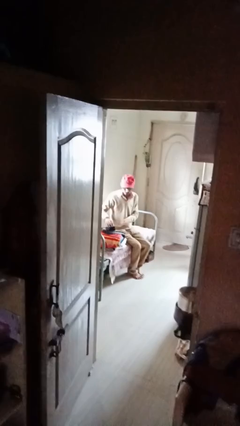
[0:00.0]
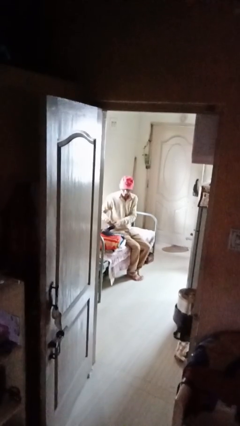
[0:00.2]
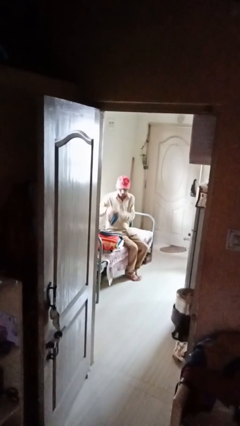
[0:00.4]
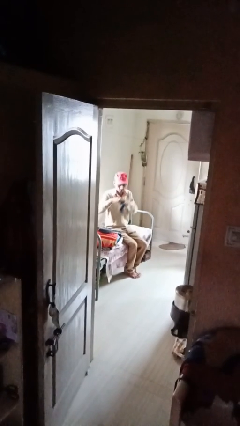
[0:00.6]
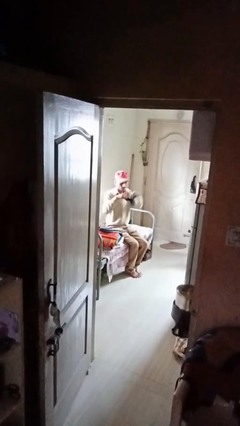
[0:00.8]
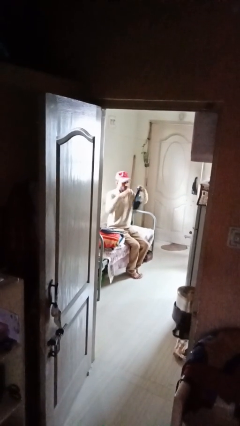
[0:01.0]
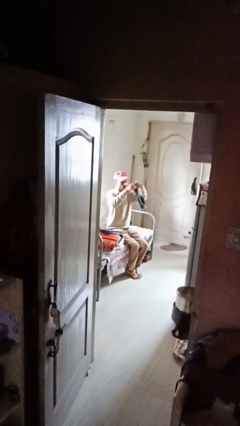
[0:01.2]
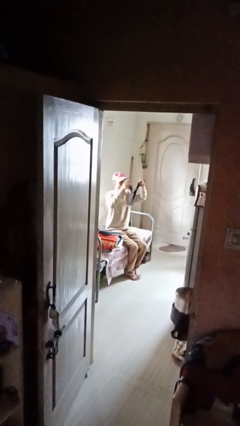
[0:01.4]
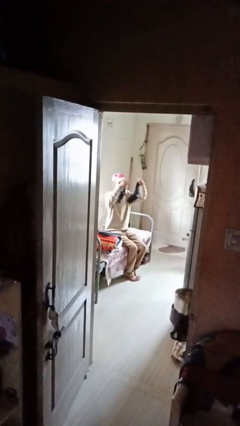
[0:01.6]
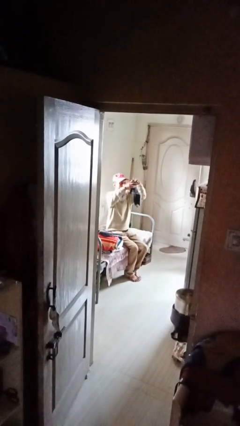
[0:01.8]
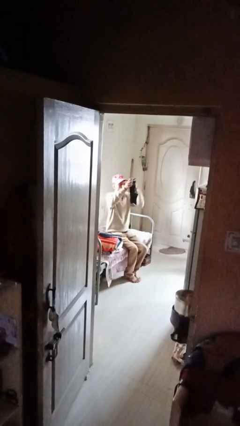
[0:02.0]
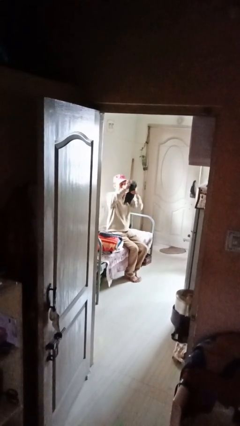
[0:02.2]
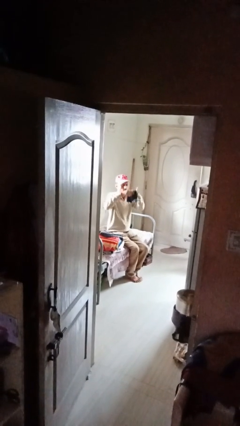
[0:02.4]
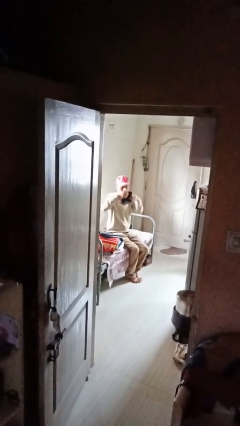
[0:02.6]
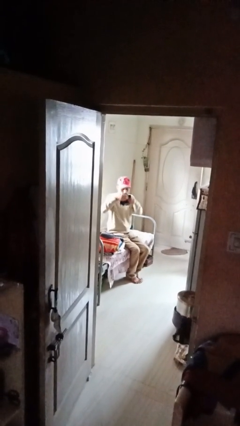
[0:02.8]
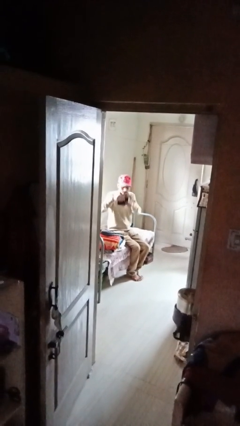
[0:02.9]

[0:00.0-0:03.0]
person folds socks

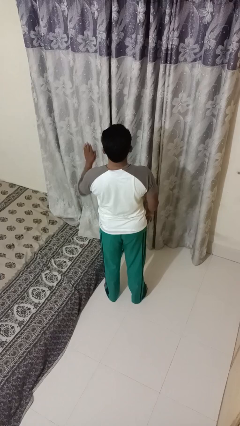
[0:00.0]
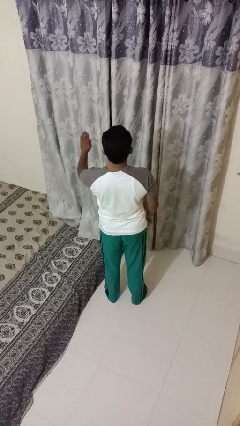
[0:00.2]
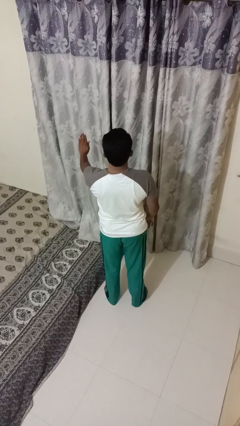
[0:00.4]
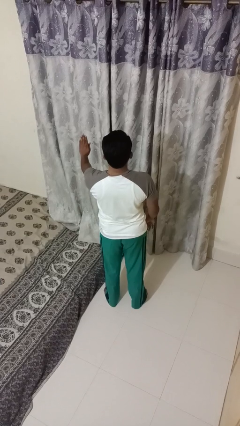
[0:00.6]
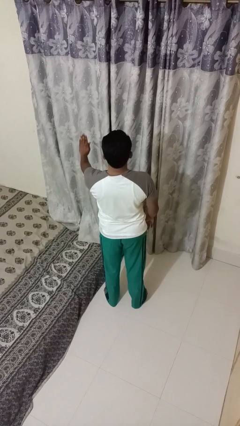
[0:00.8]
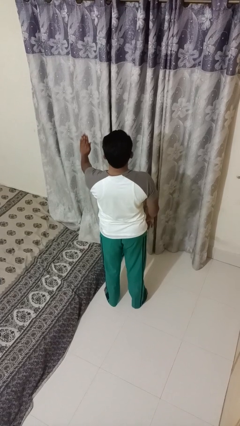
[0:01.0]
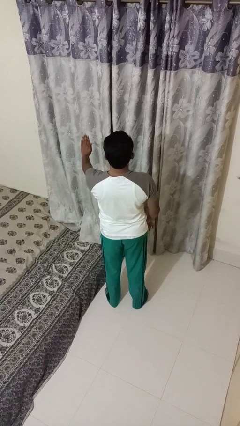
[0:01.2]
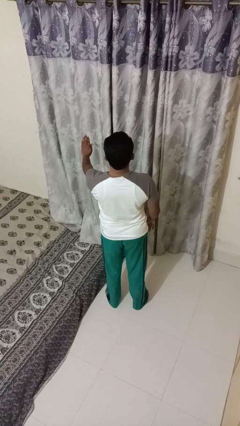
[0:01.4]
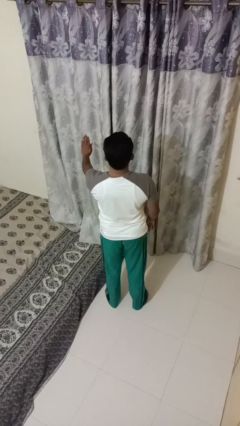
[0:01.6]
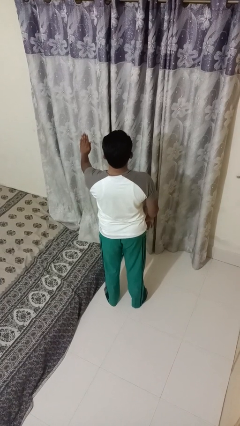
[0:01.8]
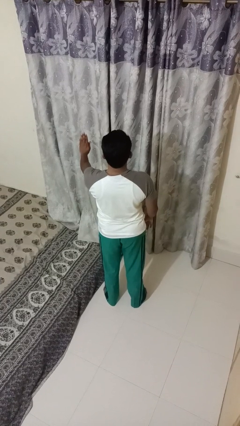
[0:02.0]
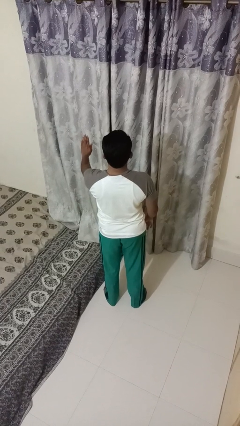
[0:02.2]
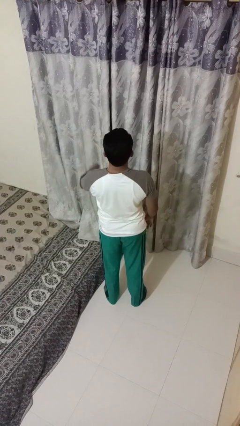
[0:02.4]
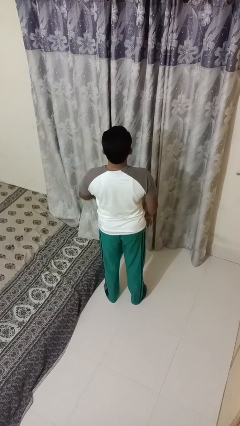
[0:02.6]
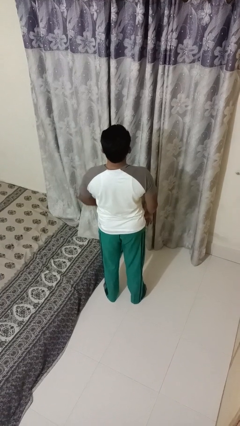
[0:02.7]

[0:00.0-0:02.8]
person gestures stop

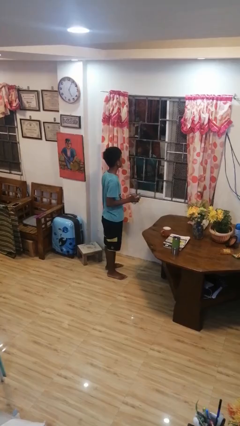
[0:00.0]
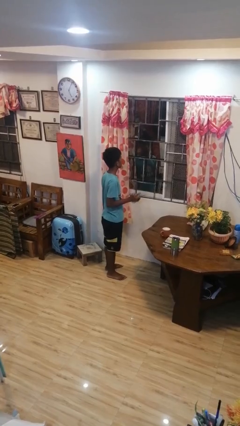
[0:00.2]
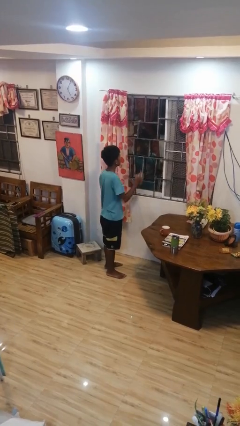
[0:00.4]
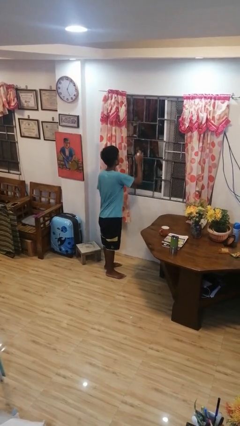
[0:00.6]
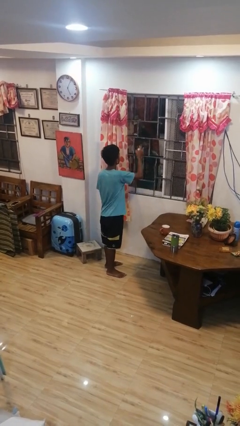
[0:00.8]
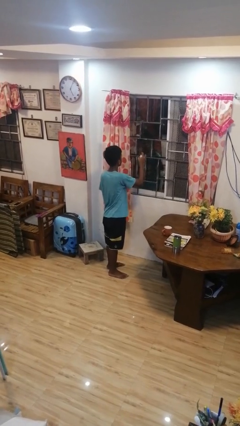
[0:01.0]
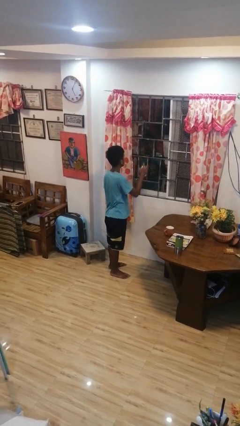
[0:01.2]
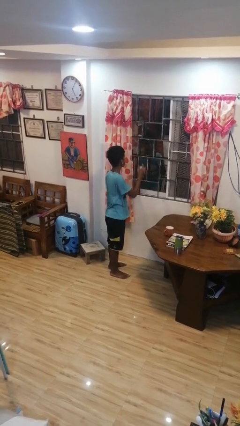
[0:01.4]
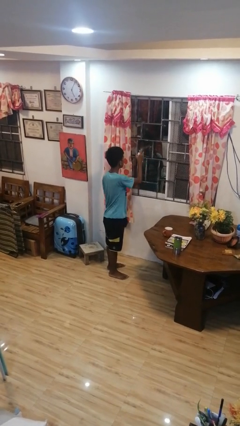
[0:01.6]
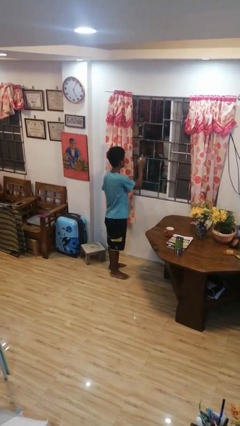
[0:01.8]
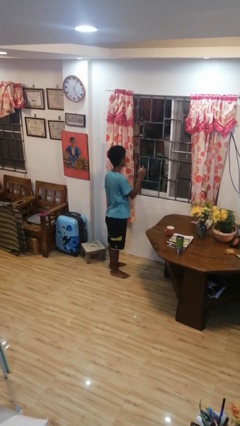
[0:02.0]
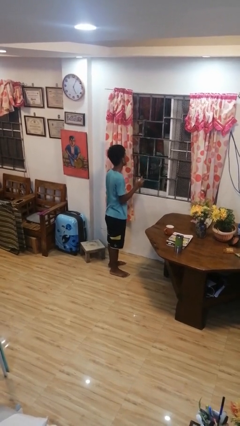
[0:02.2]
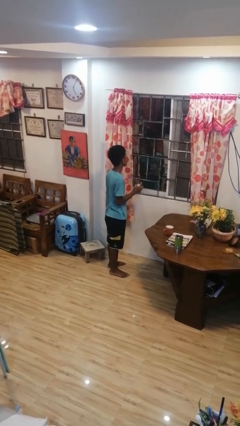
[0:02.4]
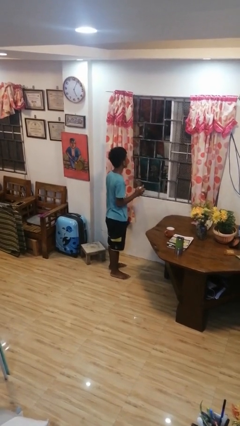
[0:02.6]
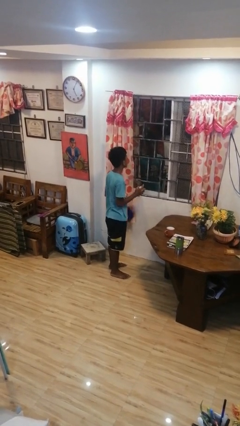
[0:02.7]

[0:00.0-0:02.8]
person sprays from bottle

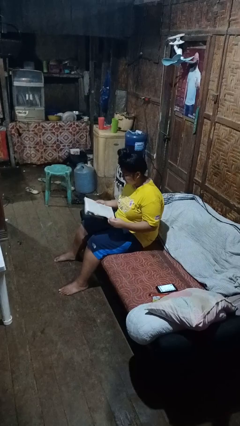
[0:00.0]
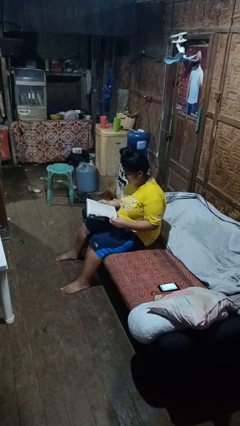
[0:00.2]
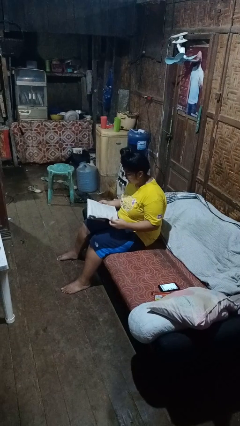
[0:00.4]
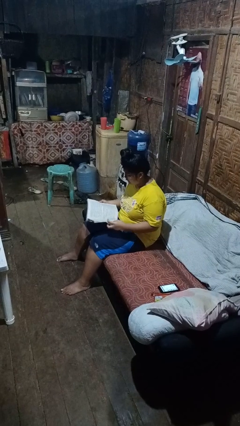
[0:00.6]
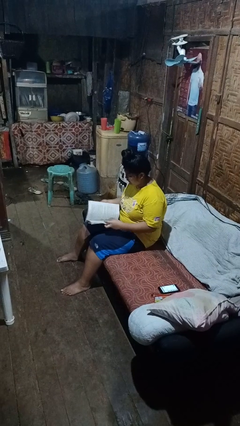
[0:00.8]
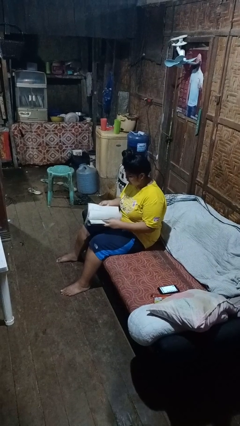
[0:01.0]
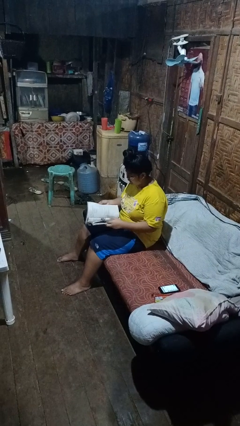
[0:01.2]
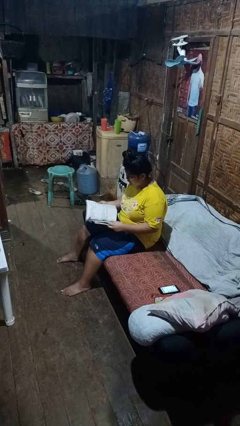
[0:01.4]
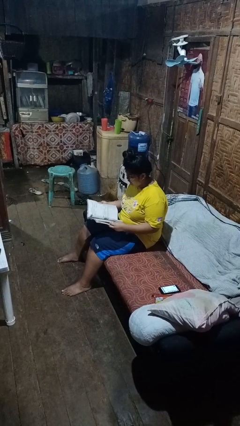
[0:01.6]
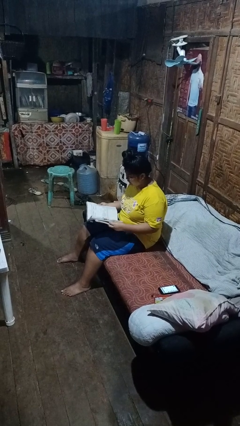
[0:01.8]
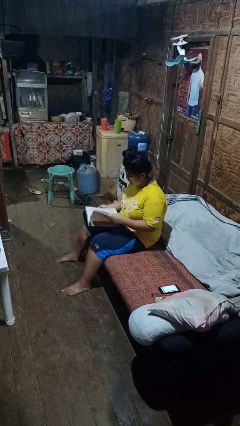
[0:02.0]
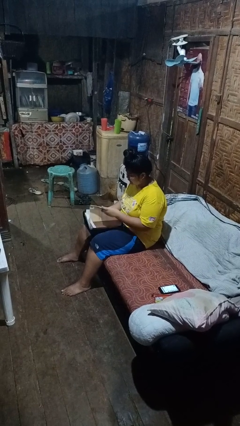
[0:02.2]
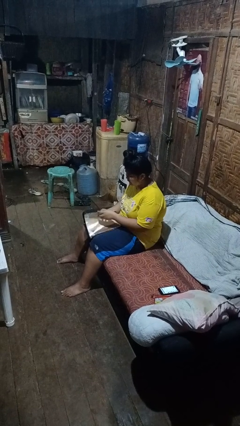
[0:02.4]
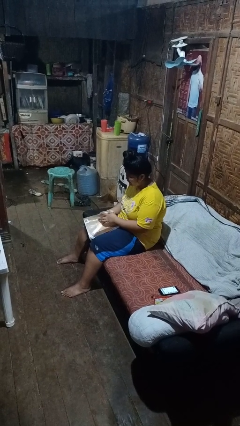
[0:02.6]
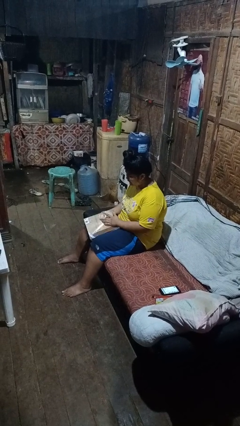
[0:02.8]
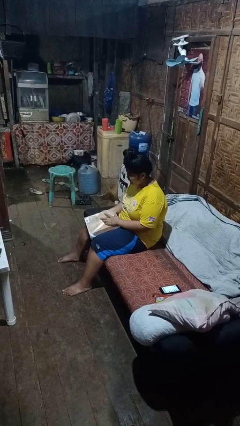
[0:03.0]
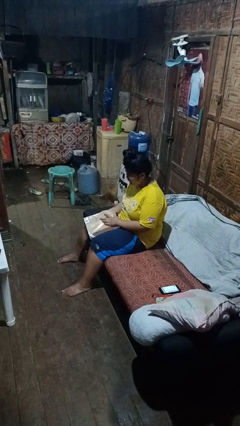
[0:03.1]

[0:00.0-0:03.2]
person reads book

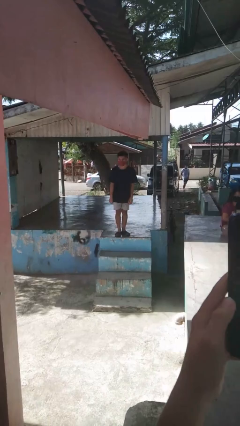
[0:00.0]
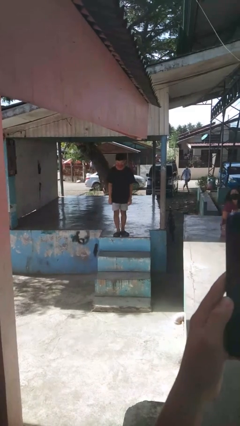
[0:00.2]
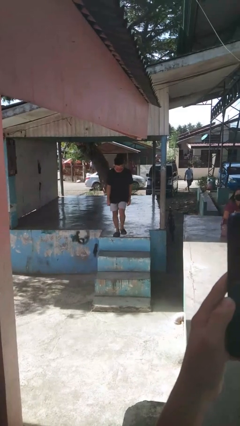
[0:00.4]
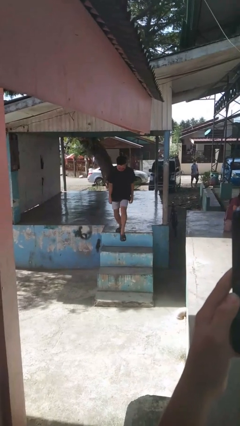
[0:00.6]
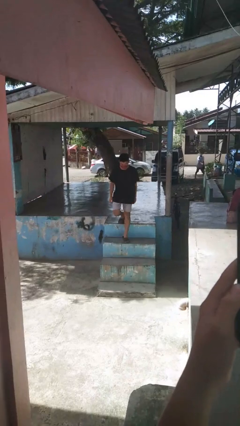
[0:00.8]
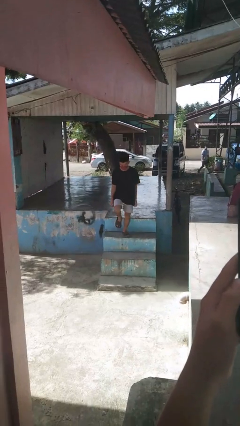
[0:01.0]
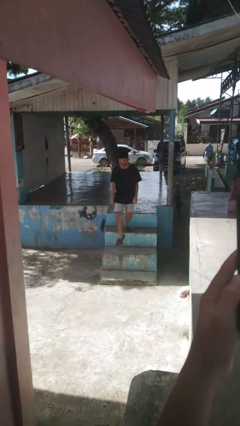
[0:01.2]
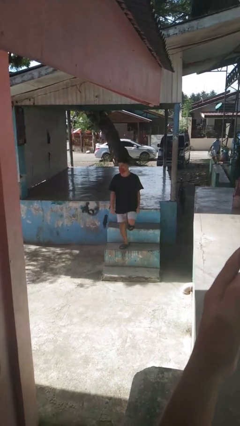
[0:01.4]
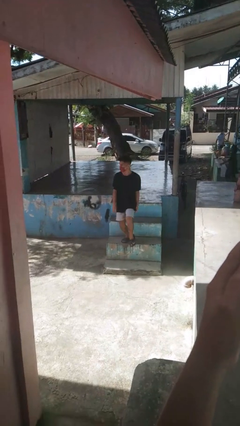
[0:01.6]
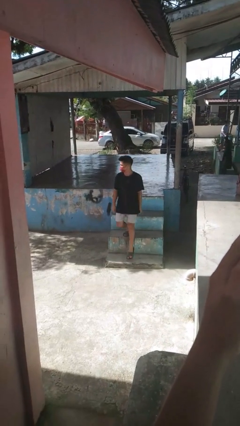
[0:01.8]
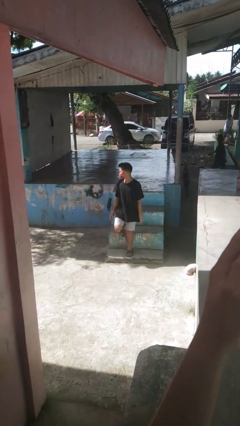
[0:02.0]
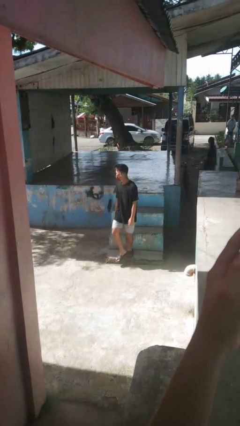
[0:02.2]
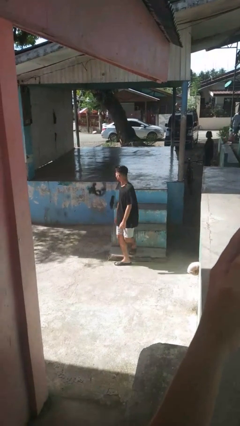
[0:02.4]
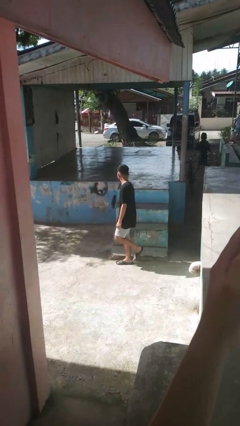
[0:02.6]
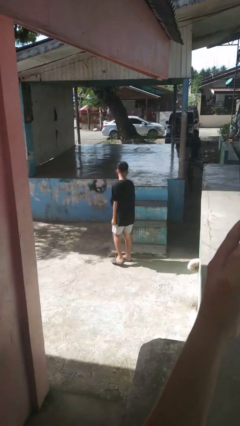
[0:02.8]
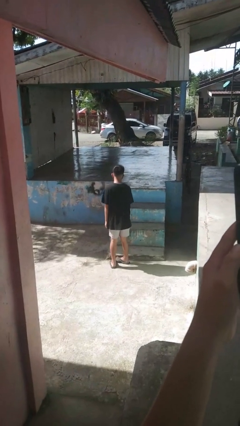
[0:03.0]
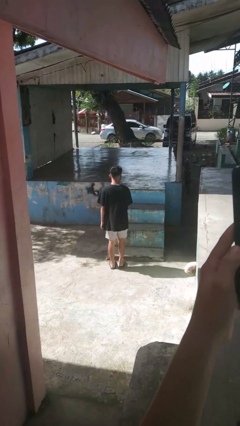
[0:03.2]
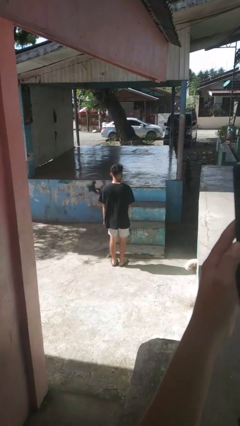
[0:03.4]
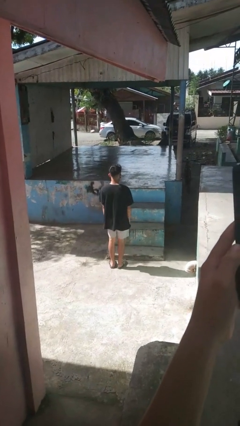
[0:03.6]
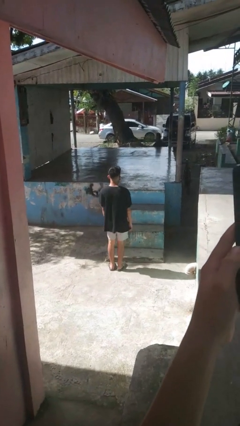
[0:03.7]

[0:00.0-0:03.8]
person climbs down stairs

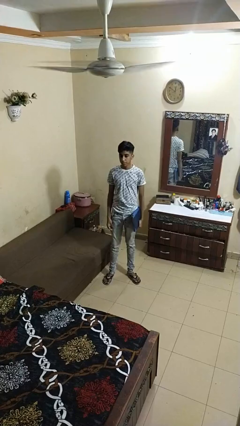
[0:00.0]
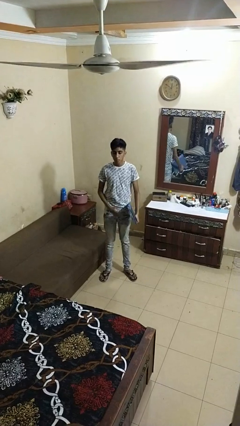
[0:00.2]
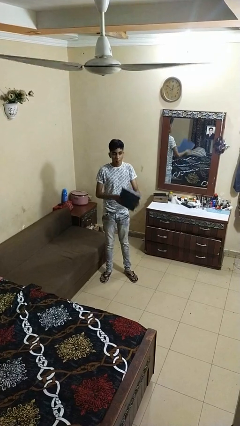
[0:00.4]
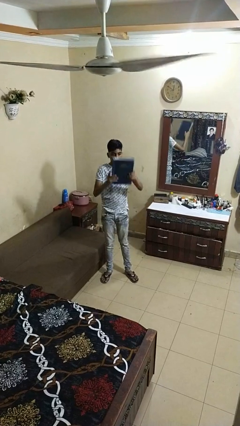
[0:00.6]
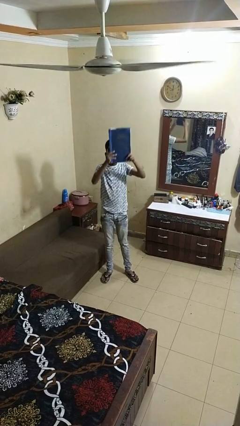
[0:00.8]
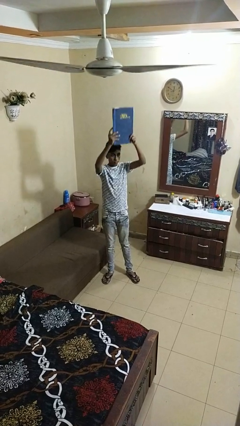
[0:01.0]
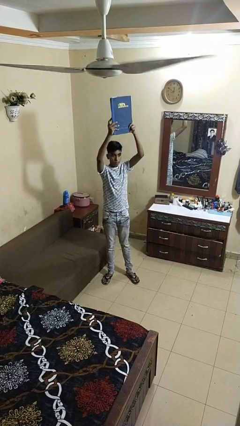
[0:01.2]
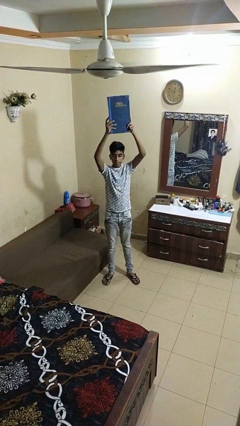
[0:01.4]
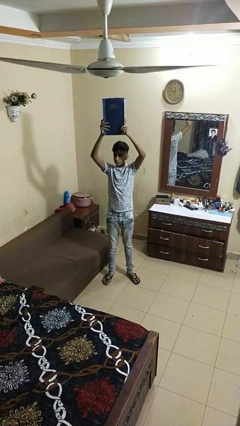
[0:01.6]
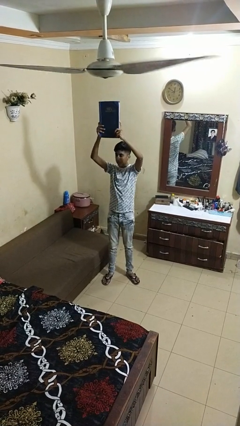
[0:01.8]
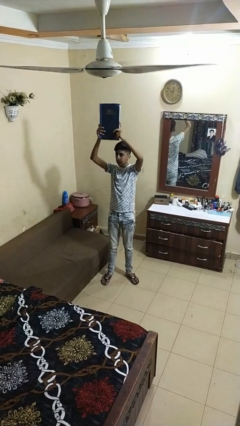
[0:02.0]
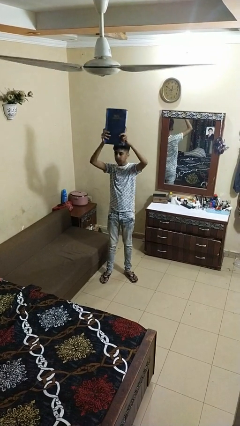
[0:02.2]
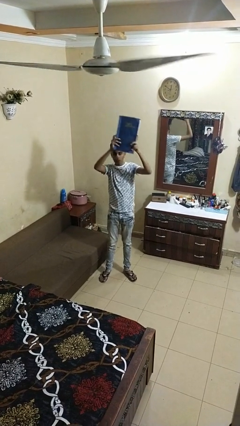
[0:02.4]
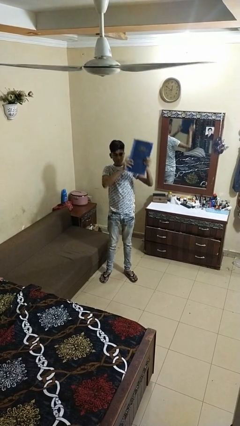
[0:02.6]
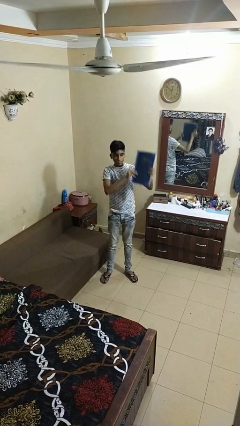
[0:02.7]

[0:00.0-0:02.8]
person holds object above head
